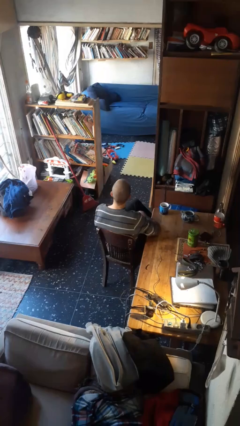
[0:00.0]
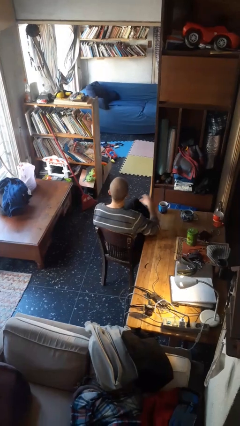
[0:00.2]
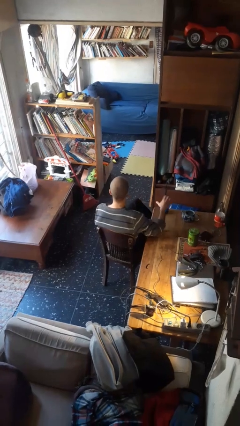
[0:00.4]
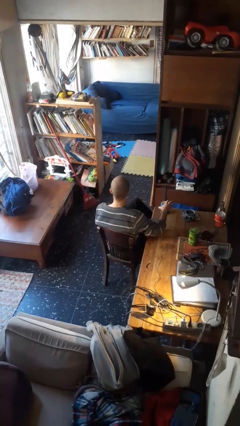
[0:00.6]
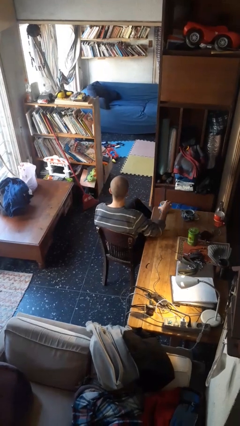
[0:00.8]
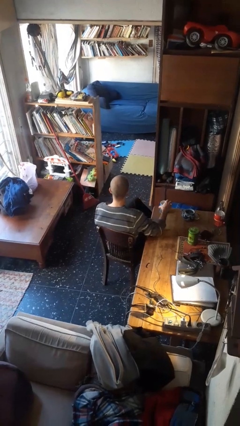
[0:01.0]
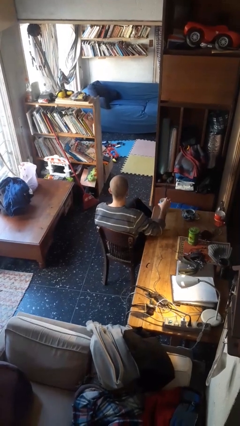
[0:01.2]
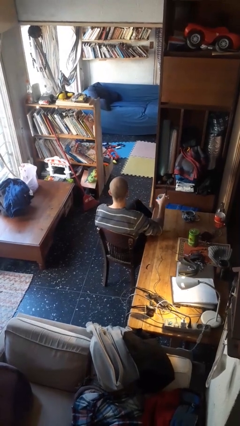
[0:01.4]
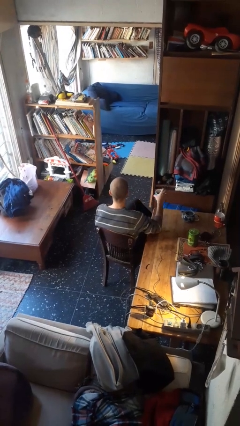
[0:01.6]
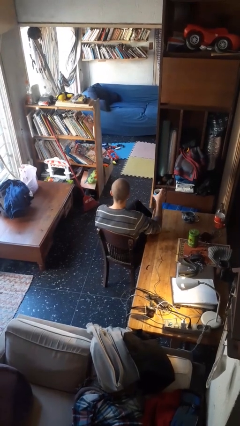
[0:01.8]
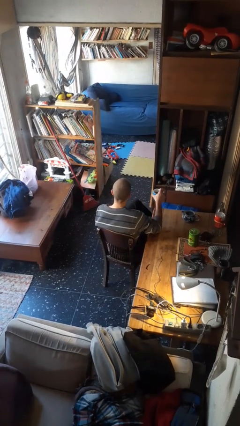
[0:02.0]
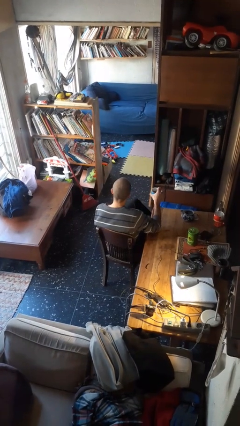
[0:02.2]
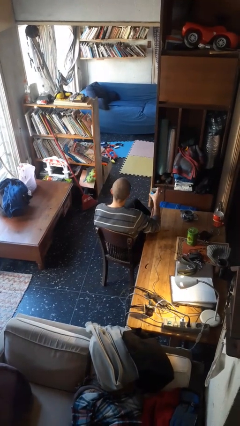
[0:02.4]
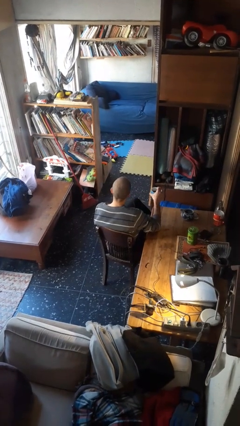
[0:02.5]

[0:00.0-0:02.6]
person picks up object from table

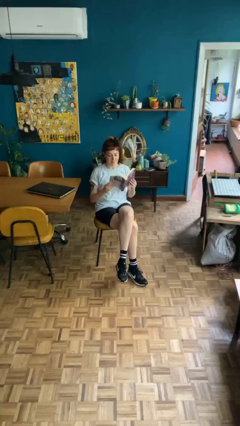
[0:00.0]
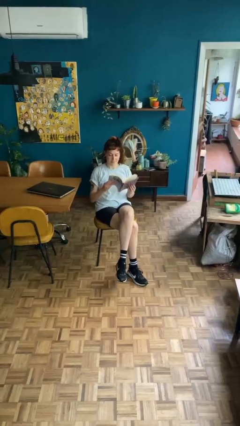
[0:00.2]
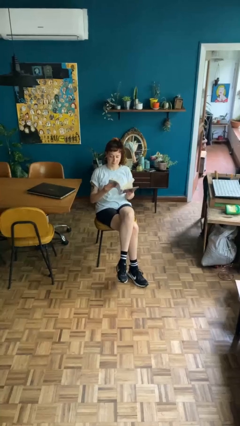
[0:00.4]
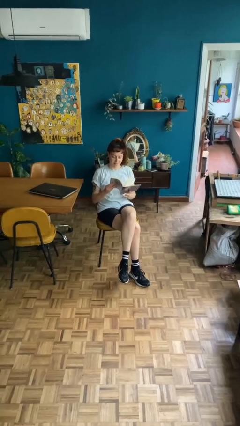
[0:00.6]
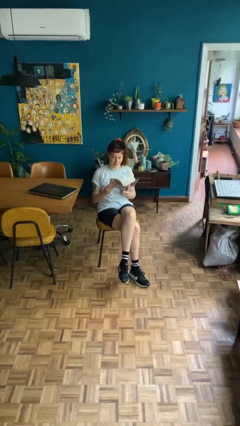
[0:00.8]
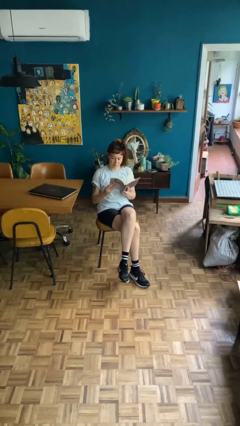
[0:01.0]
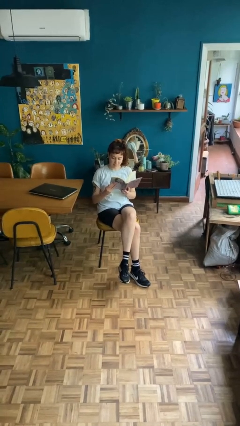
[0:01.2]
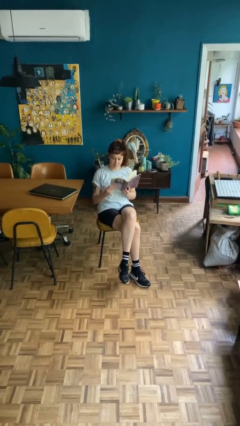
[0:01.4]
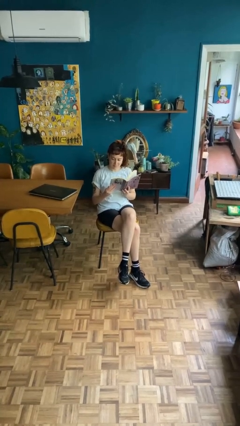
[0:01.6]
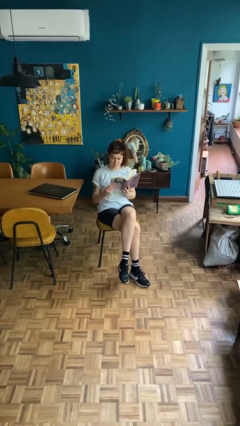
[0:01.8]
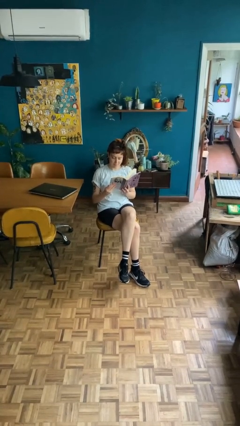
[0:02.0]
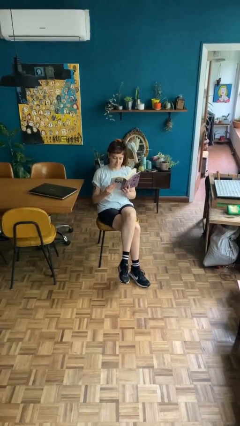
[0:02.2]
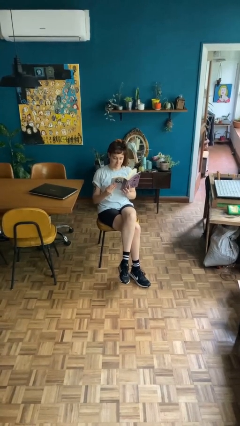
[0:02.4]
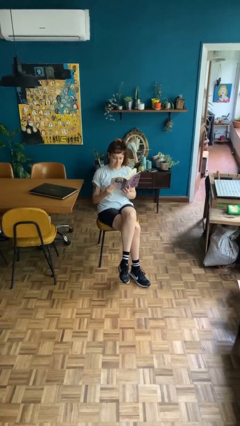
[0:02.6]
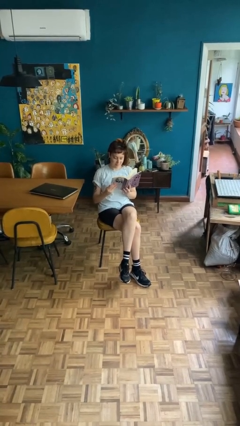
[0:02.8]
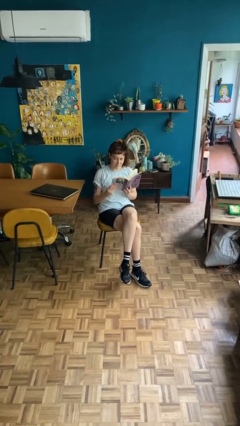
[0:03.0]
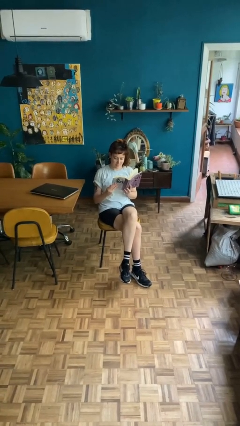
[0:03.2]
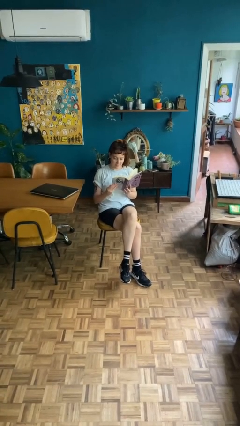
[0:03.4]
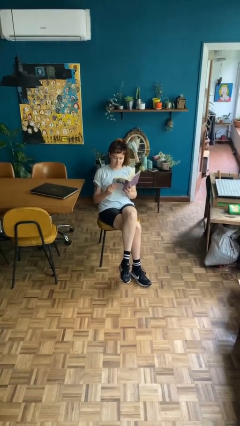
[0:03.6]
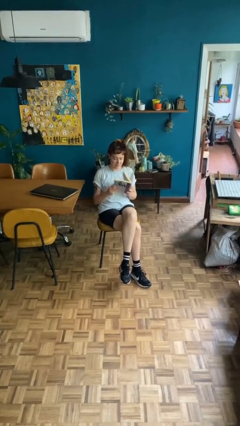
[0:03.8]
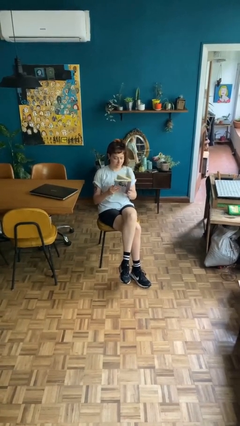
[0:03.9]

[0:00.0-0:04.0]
person reads document

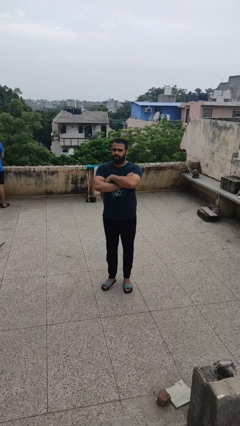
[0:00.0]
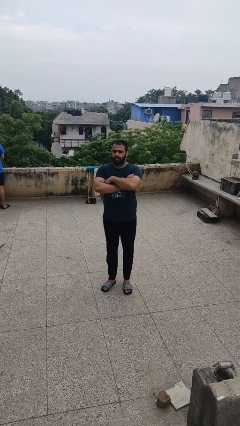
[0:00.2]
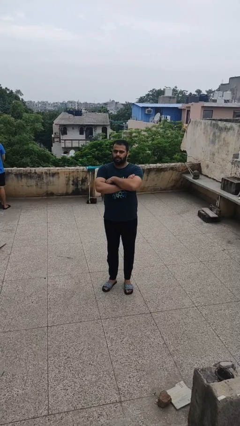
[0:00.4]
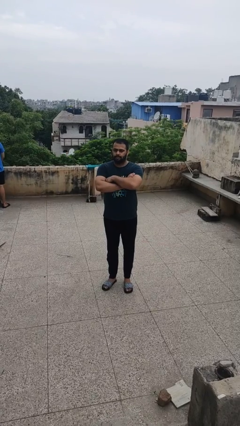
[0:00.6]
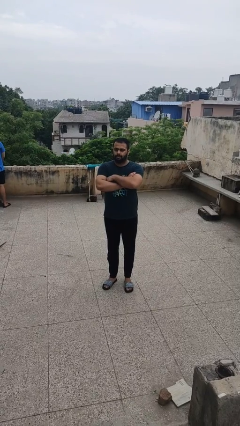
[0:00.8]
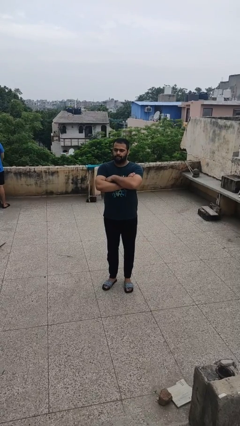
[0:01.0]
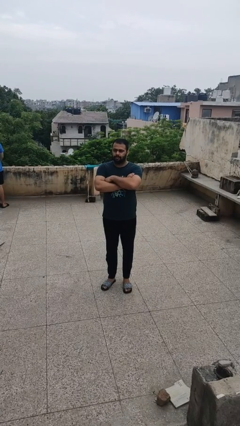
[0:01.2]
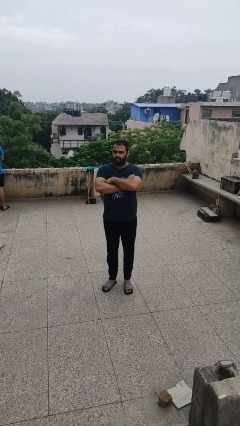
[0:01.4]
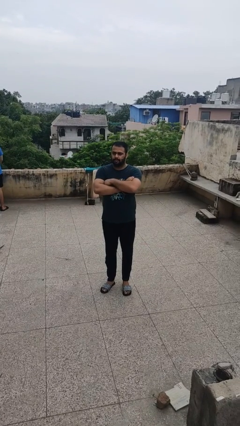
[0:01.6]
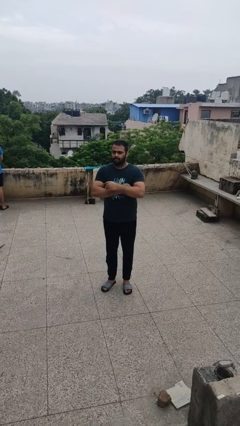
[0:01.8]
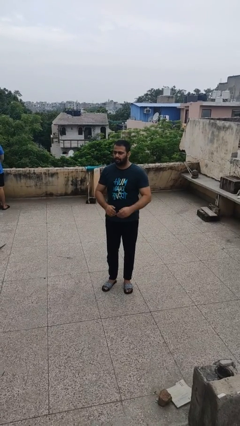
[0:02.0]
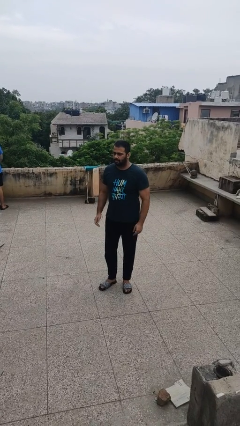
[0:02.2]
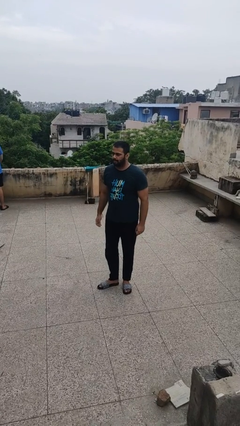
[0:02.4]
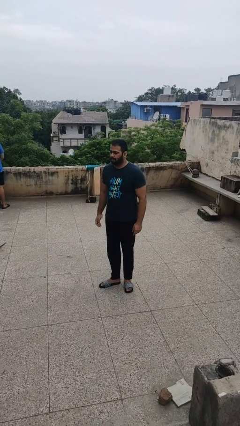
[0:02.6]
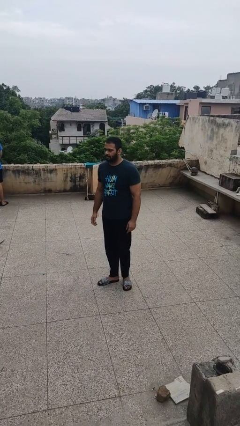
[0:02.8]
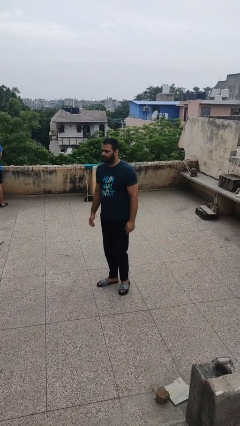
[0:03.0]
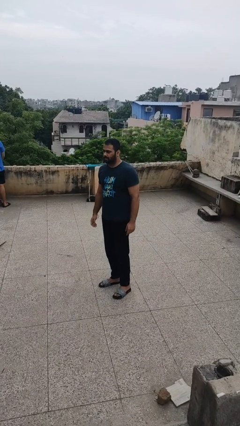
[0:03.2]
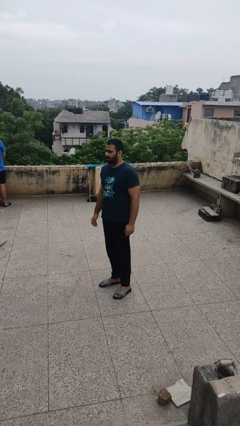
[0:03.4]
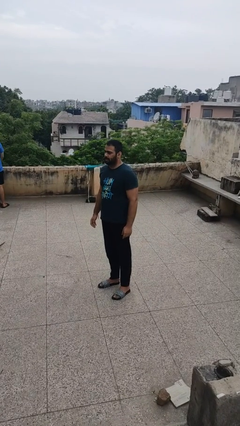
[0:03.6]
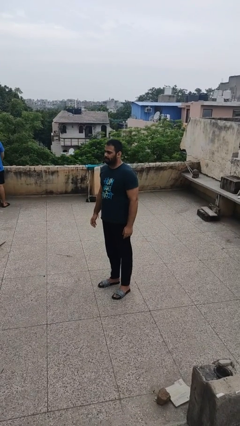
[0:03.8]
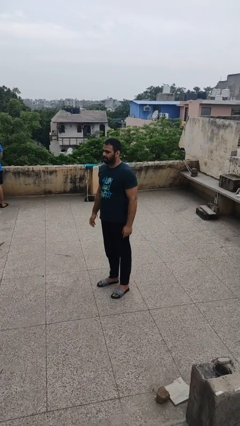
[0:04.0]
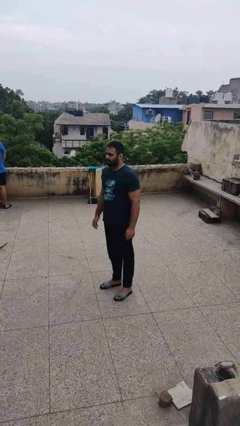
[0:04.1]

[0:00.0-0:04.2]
person crosses arms

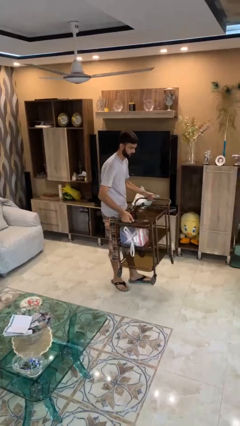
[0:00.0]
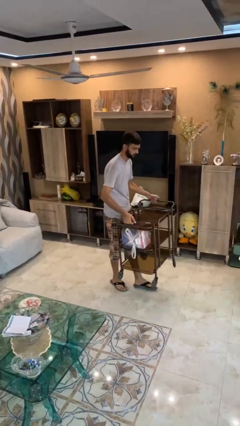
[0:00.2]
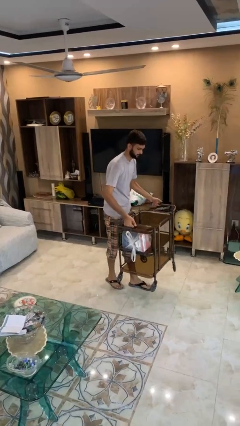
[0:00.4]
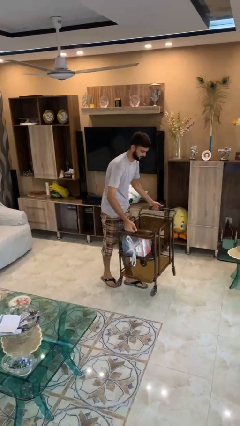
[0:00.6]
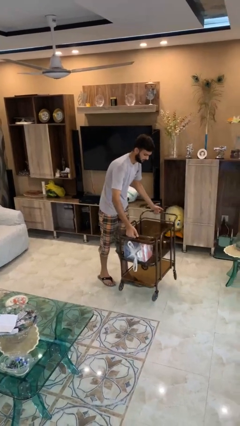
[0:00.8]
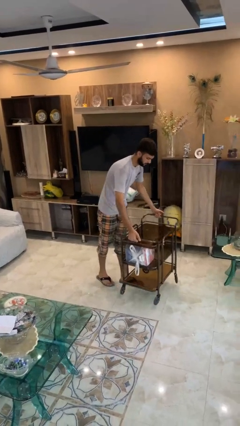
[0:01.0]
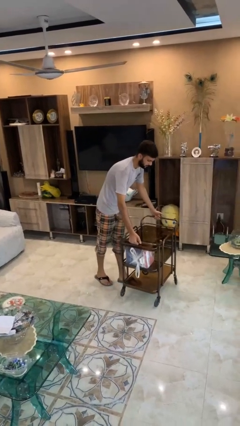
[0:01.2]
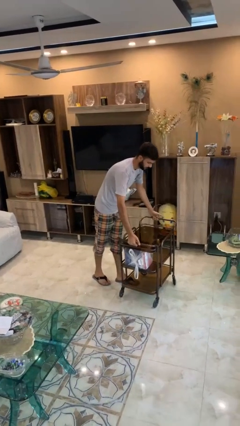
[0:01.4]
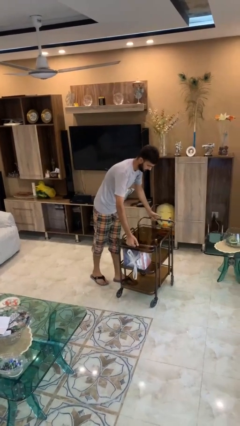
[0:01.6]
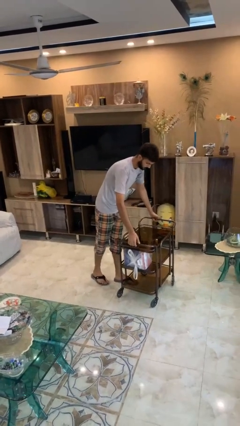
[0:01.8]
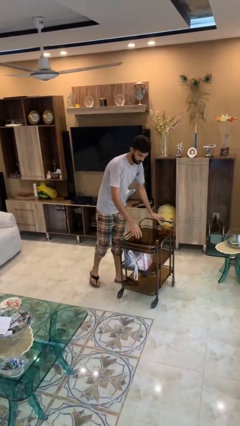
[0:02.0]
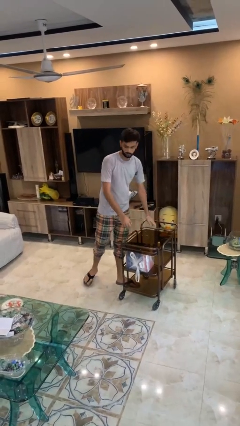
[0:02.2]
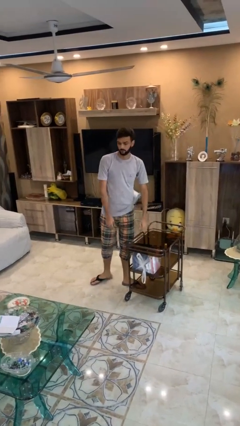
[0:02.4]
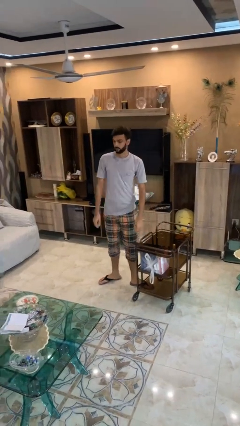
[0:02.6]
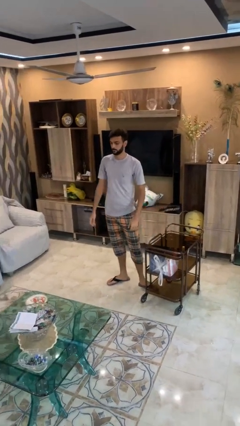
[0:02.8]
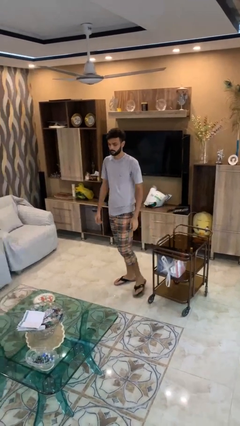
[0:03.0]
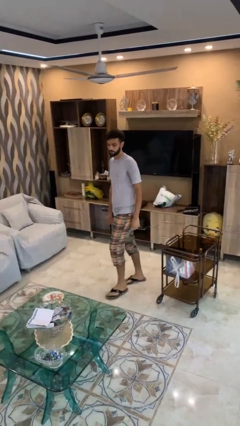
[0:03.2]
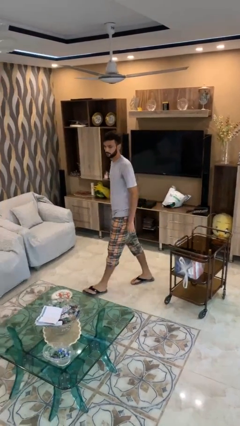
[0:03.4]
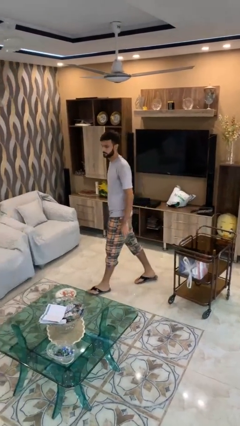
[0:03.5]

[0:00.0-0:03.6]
person puts down object on floor

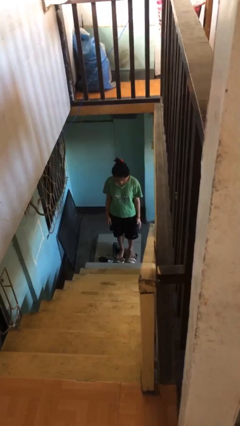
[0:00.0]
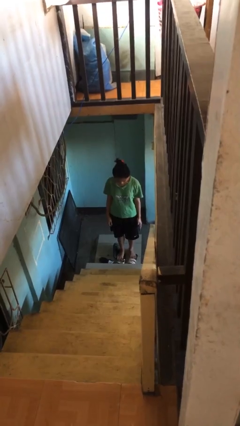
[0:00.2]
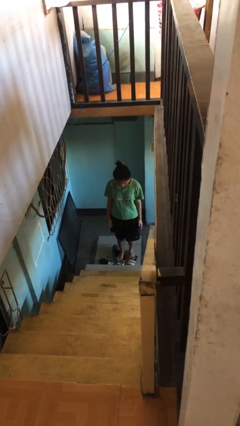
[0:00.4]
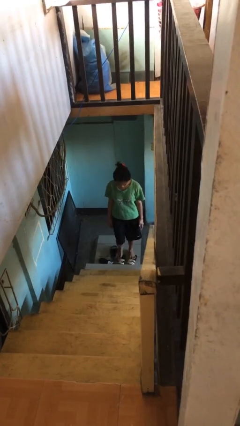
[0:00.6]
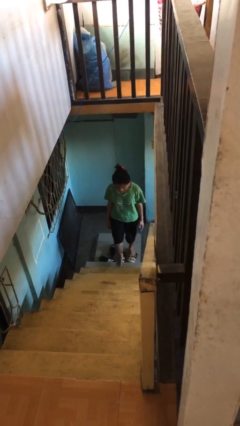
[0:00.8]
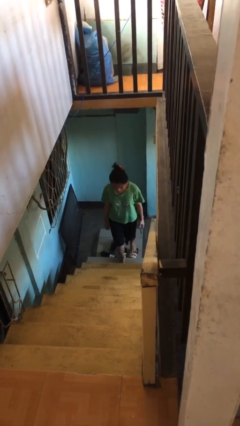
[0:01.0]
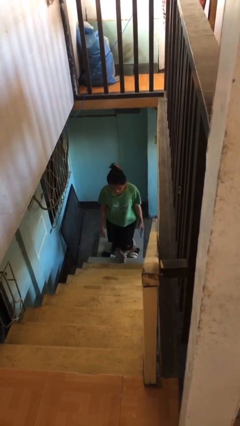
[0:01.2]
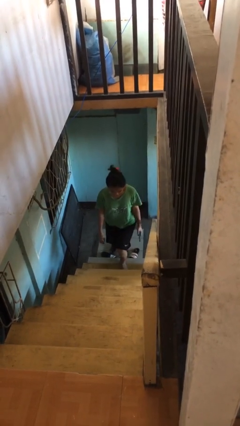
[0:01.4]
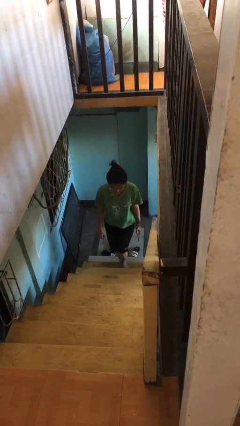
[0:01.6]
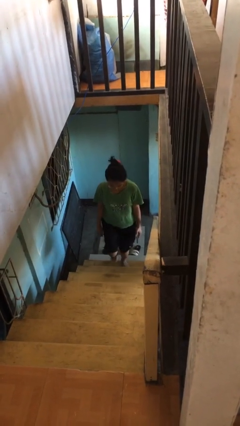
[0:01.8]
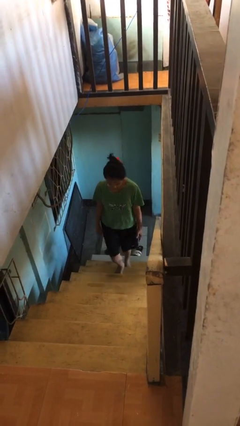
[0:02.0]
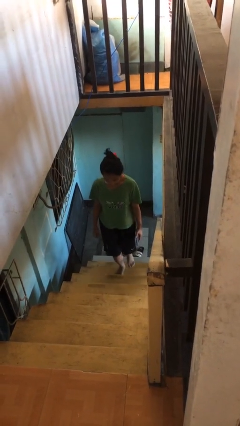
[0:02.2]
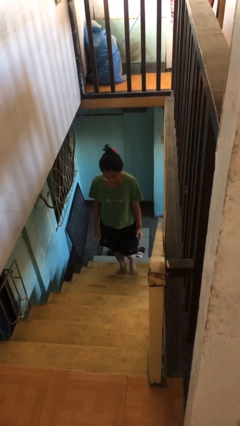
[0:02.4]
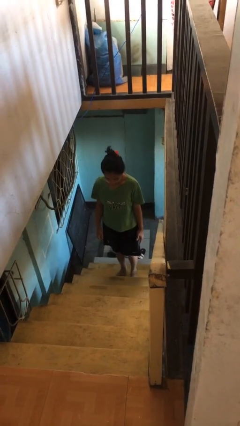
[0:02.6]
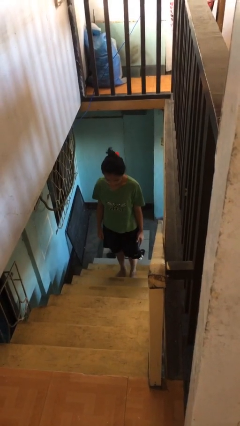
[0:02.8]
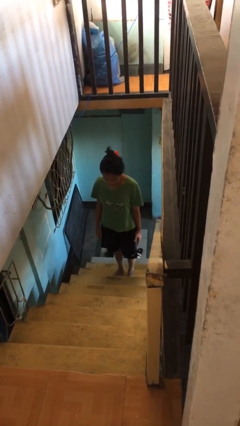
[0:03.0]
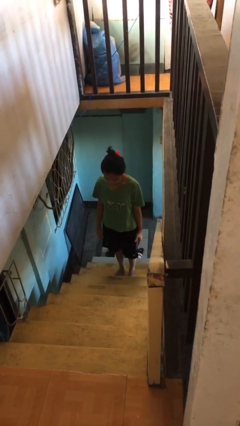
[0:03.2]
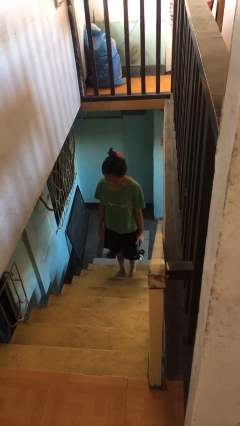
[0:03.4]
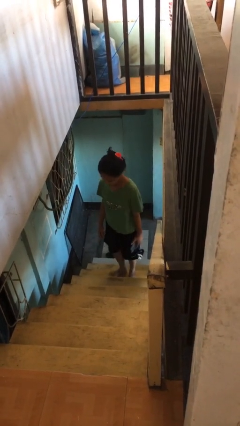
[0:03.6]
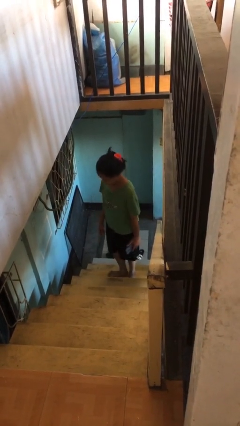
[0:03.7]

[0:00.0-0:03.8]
person climbs up stairs
